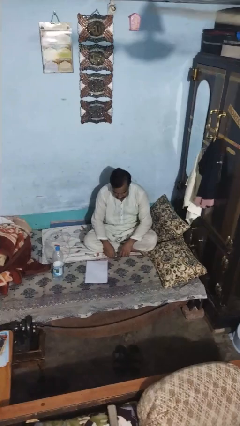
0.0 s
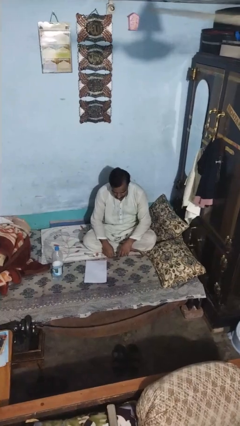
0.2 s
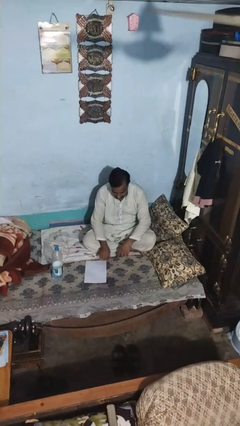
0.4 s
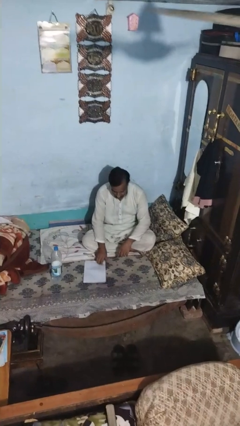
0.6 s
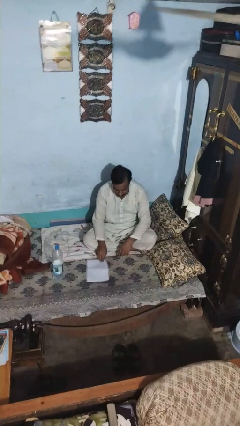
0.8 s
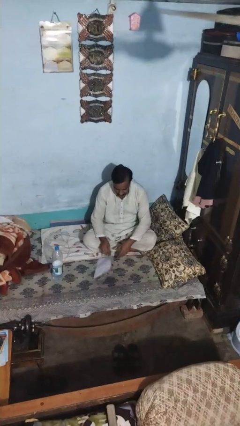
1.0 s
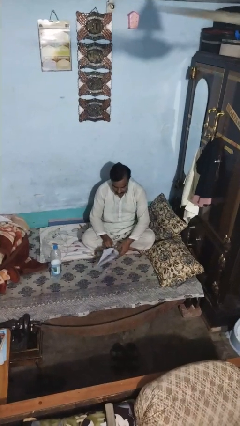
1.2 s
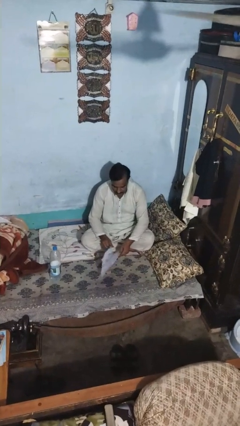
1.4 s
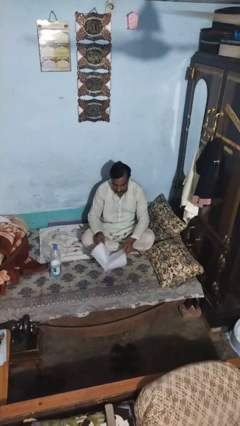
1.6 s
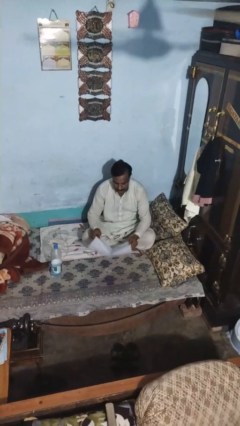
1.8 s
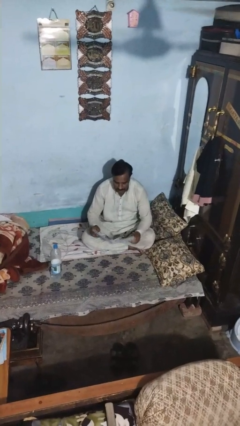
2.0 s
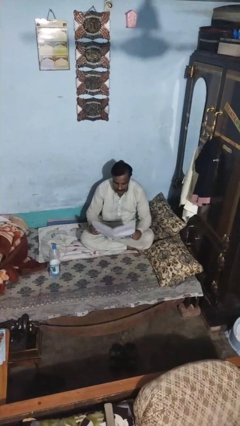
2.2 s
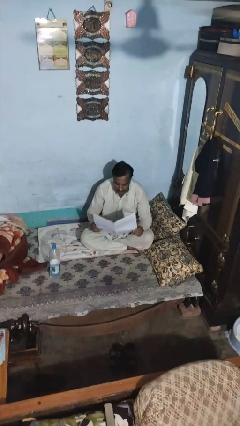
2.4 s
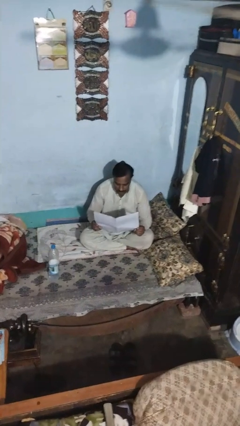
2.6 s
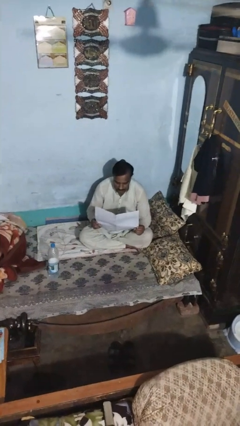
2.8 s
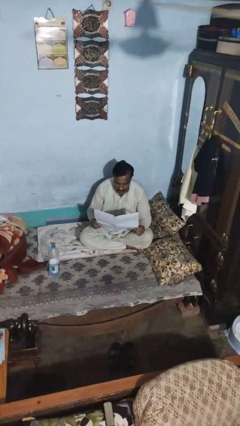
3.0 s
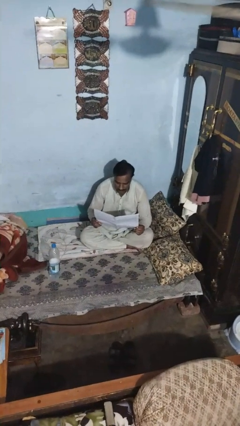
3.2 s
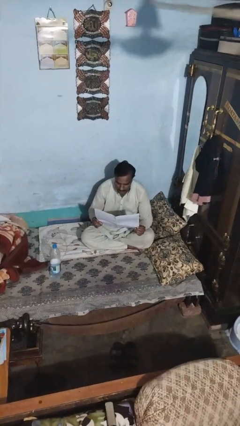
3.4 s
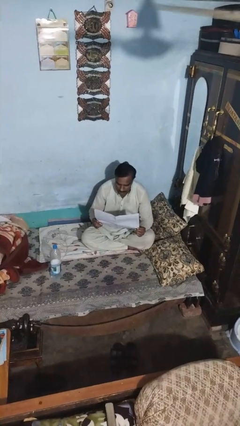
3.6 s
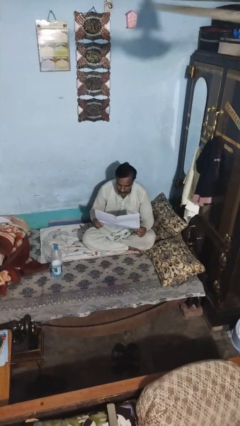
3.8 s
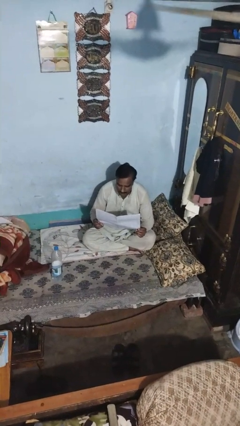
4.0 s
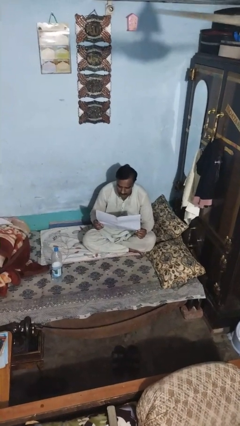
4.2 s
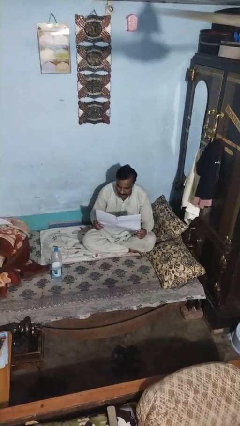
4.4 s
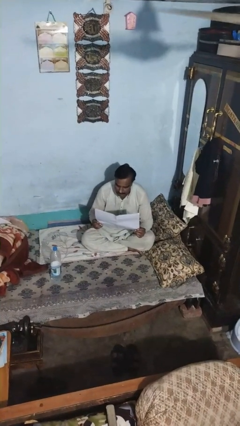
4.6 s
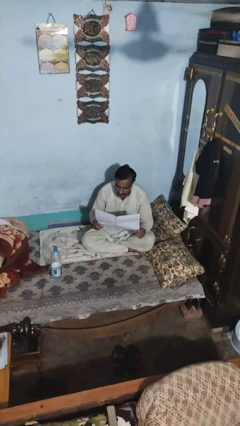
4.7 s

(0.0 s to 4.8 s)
person reads newspaper

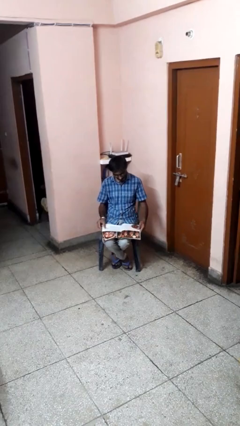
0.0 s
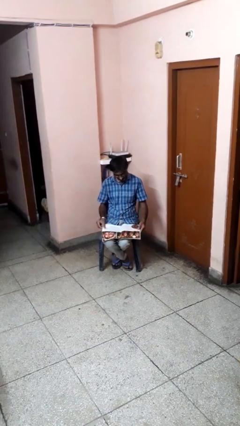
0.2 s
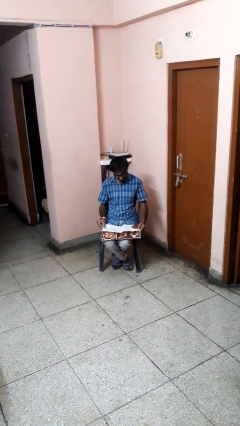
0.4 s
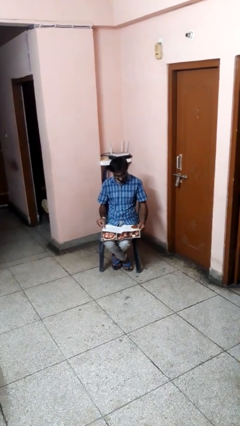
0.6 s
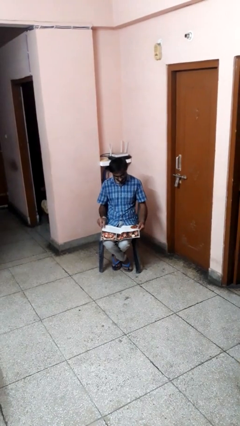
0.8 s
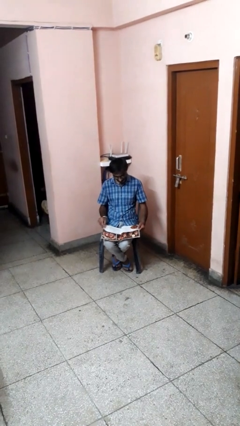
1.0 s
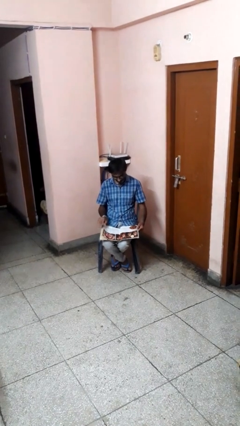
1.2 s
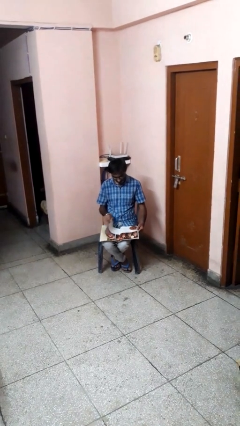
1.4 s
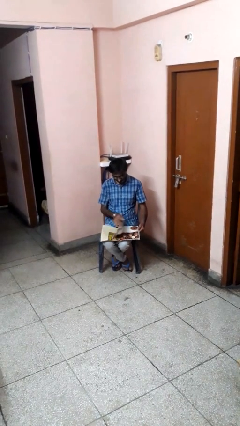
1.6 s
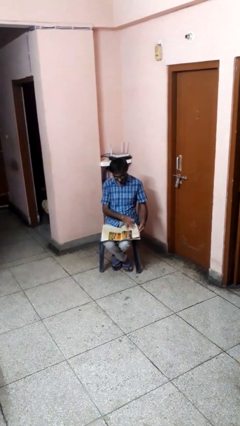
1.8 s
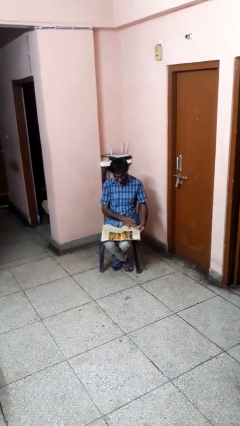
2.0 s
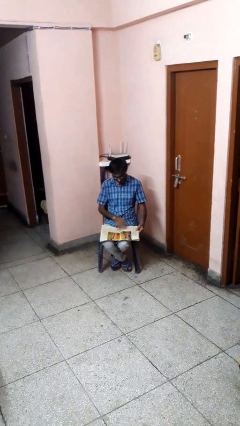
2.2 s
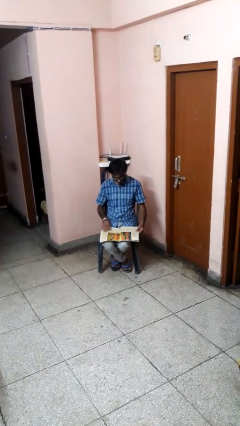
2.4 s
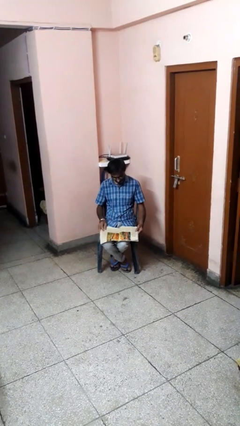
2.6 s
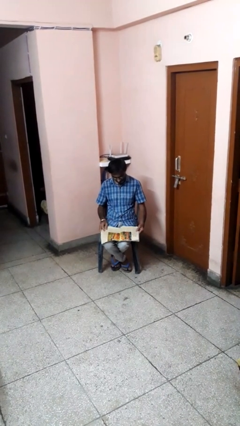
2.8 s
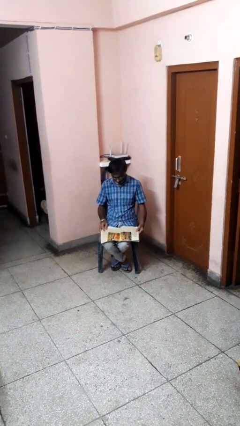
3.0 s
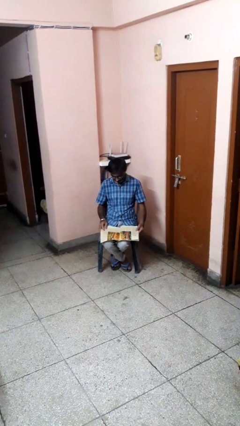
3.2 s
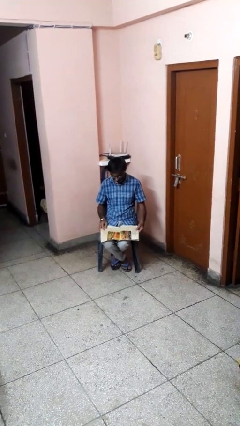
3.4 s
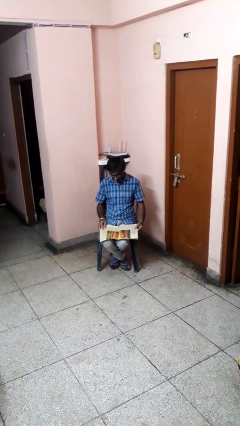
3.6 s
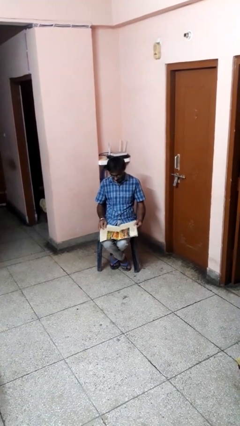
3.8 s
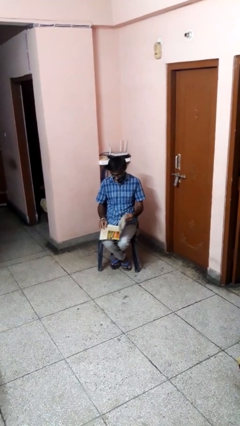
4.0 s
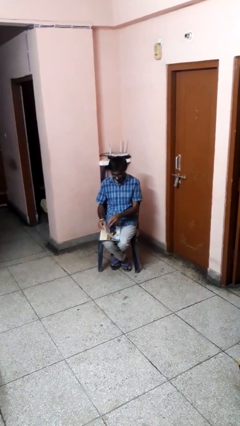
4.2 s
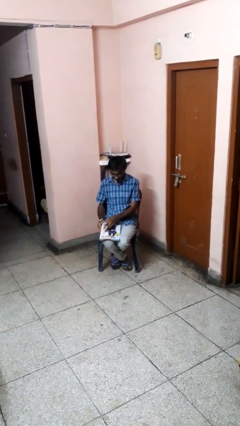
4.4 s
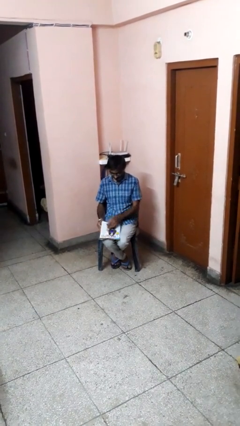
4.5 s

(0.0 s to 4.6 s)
person reads magazine

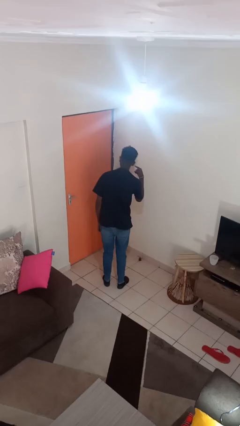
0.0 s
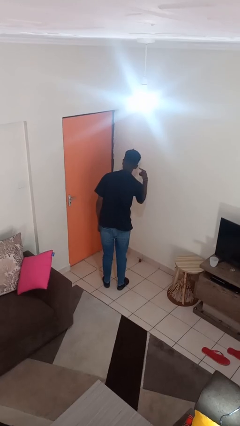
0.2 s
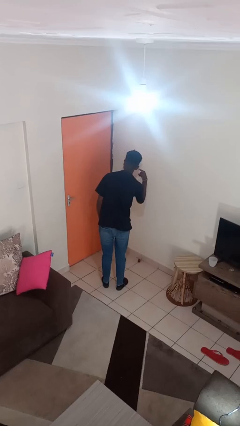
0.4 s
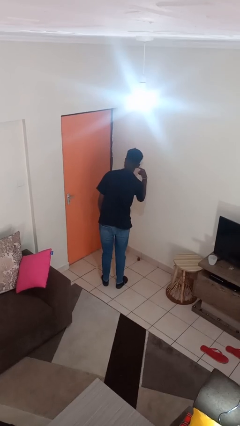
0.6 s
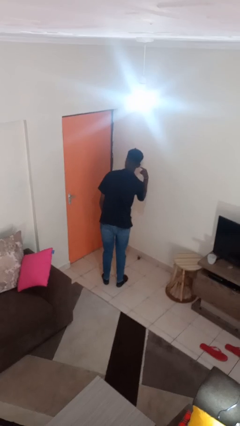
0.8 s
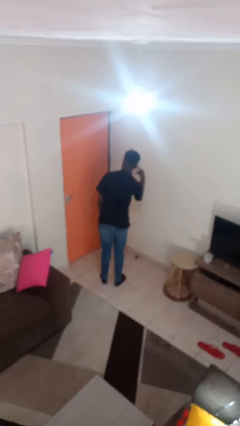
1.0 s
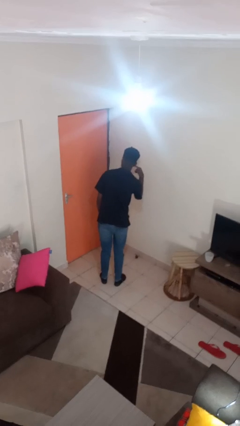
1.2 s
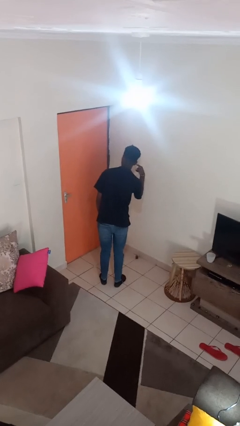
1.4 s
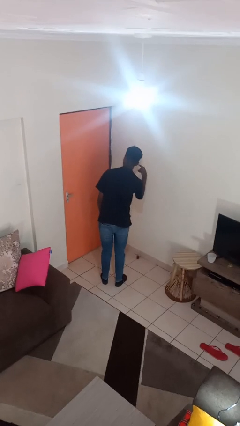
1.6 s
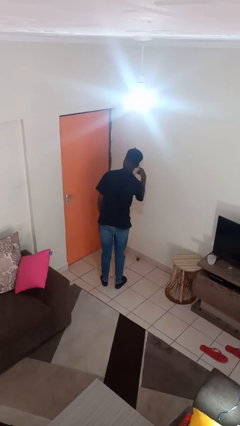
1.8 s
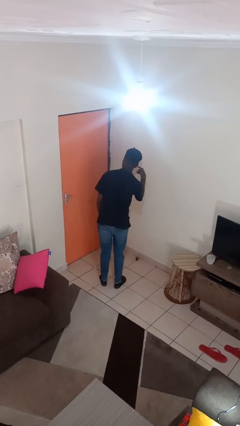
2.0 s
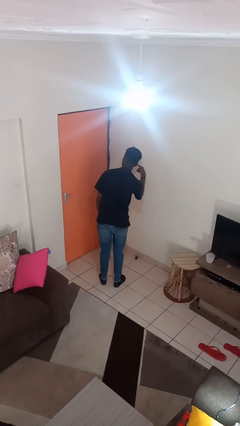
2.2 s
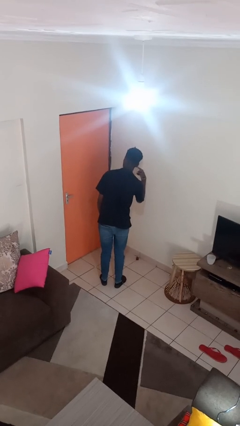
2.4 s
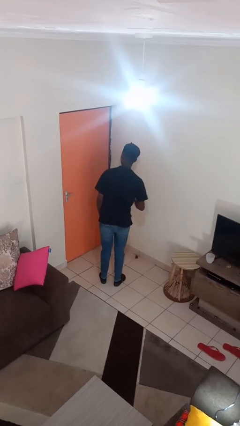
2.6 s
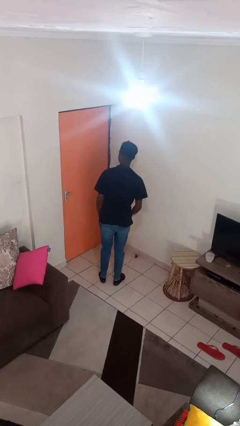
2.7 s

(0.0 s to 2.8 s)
person gestures listen closely

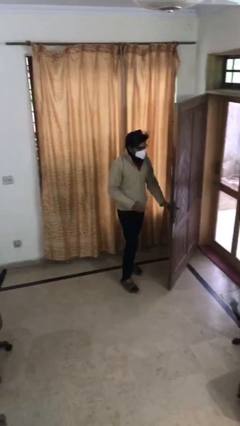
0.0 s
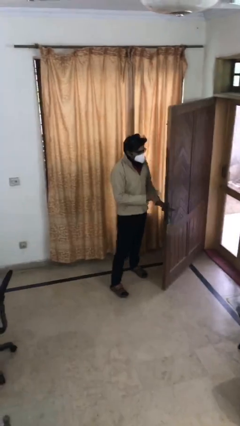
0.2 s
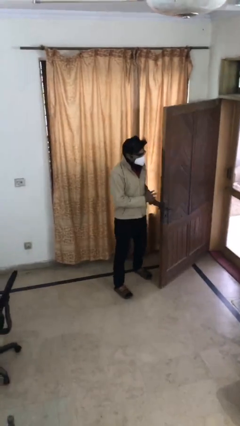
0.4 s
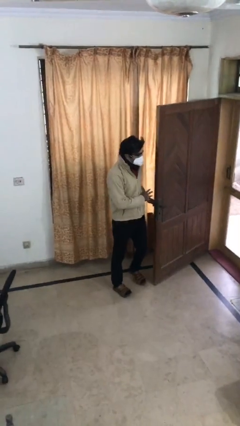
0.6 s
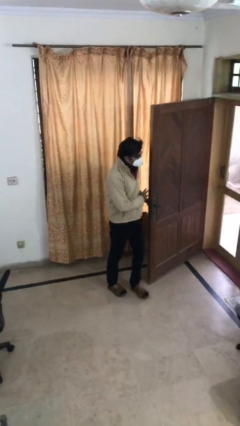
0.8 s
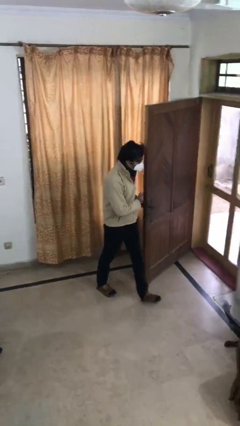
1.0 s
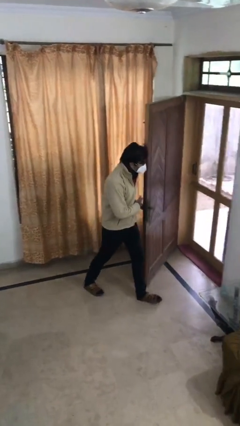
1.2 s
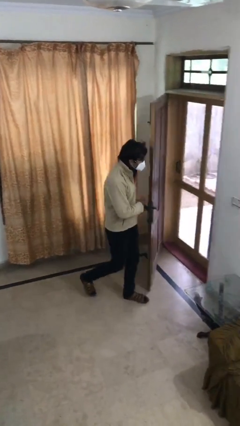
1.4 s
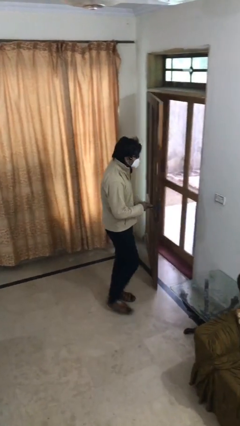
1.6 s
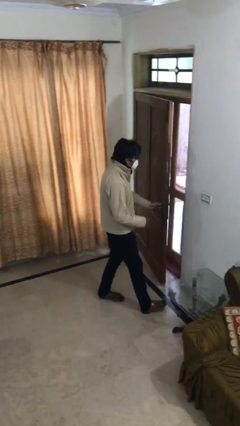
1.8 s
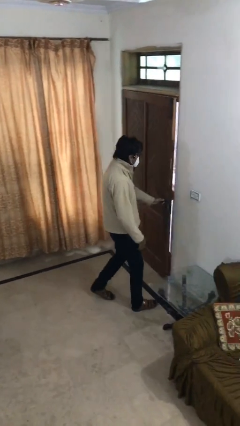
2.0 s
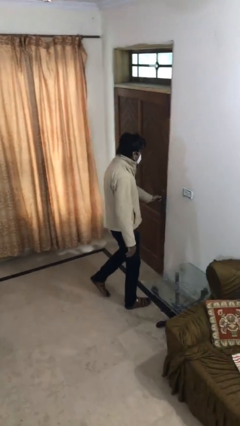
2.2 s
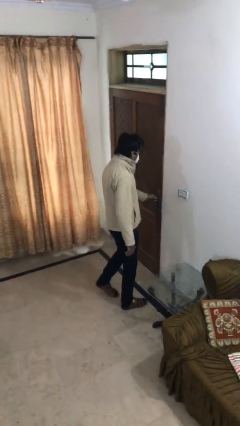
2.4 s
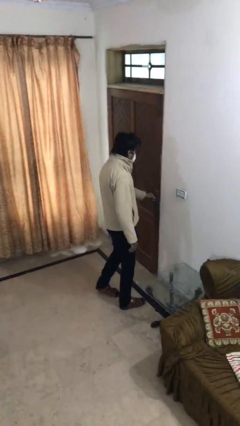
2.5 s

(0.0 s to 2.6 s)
person closes facility door

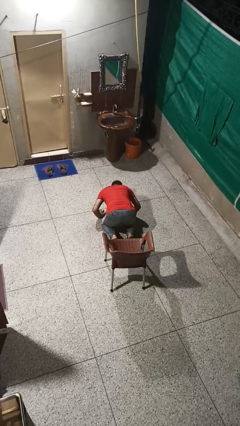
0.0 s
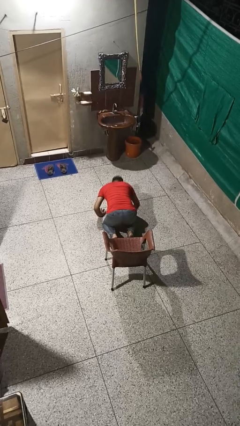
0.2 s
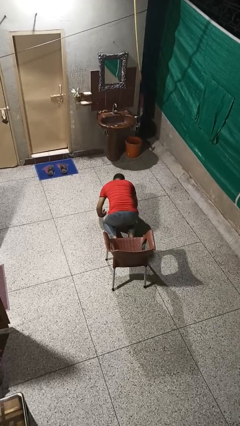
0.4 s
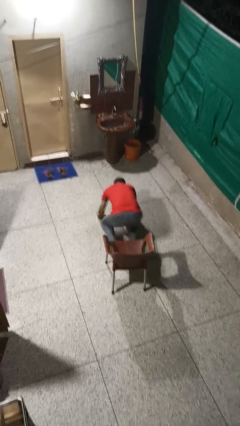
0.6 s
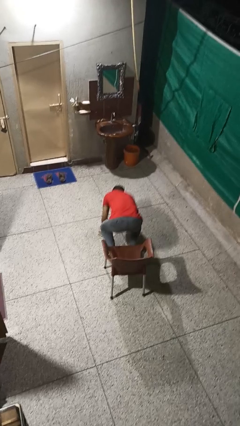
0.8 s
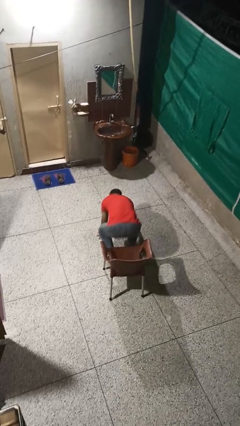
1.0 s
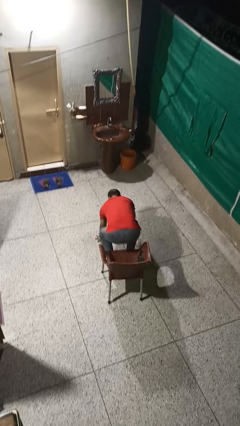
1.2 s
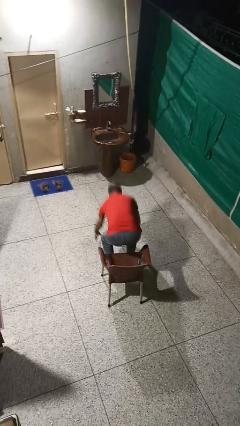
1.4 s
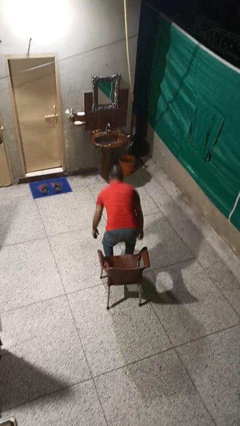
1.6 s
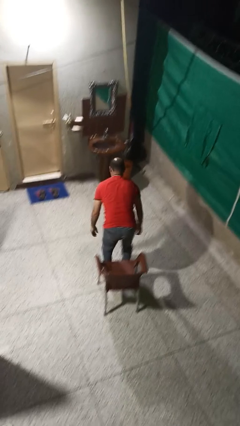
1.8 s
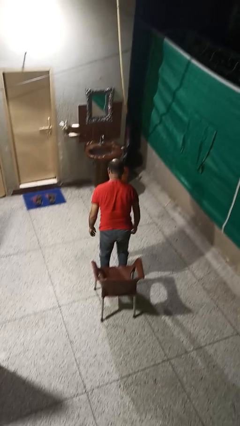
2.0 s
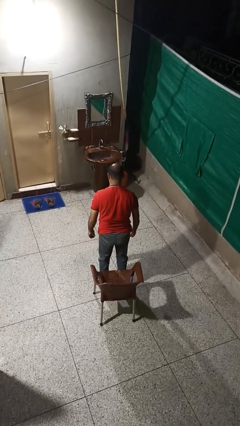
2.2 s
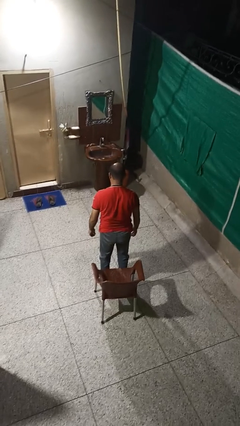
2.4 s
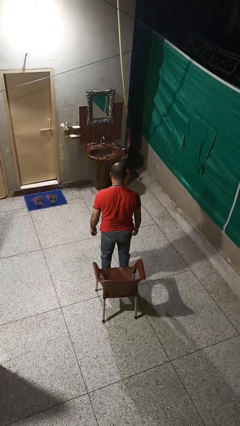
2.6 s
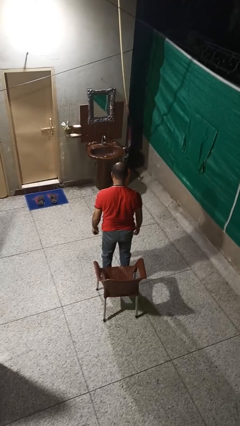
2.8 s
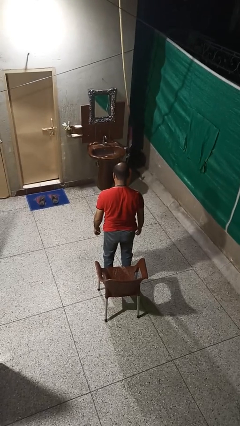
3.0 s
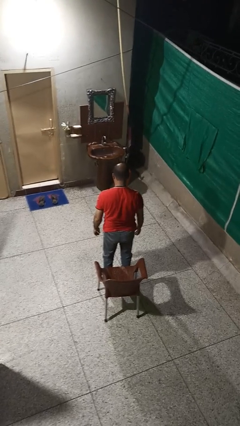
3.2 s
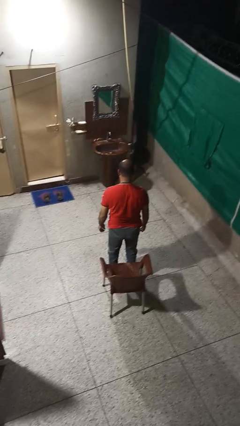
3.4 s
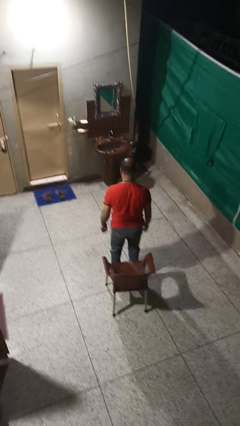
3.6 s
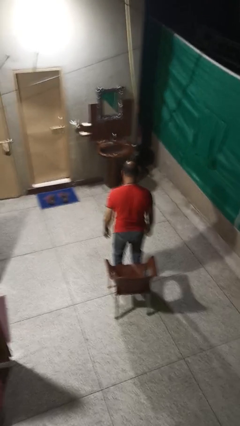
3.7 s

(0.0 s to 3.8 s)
person stands up from floor
